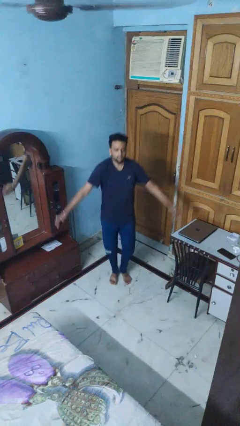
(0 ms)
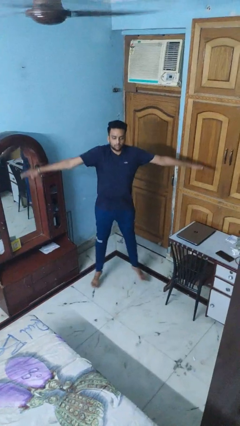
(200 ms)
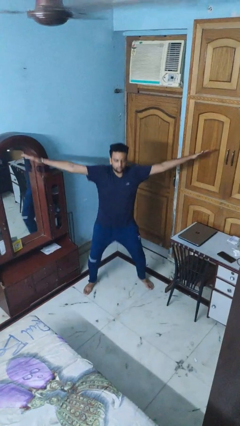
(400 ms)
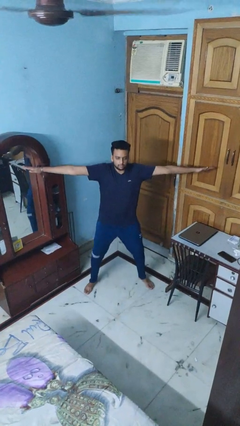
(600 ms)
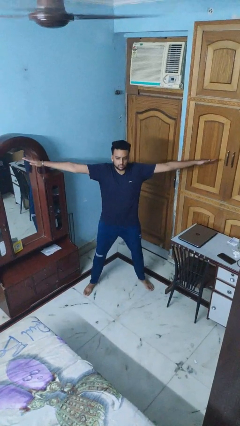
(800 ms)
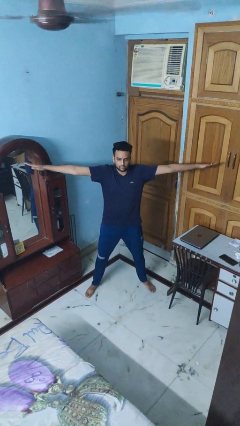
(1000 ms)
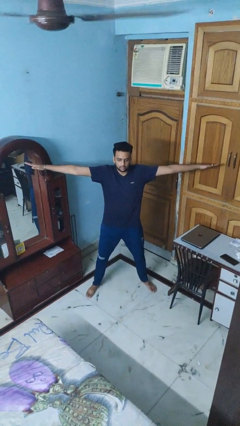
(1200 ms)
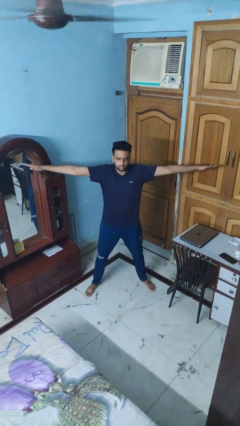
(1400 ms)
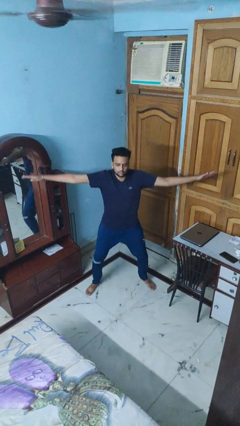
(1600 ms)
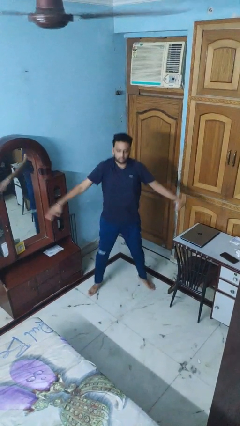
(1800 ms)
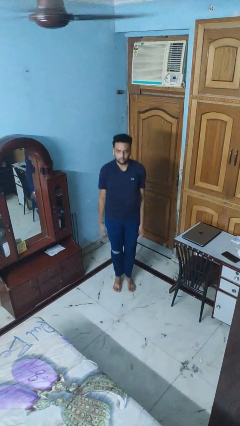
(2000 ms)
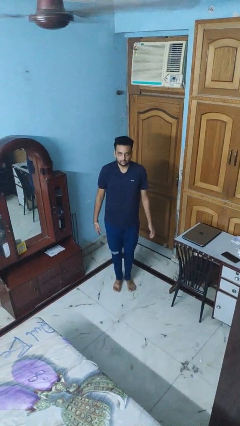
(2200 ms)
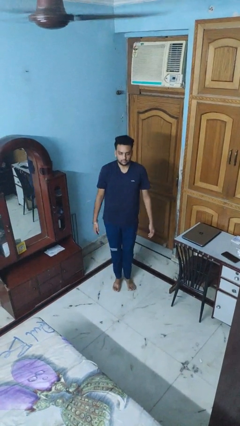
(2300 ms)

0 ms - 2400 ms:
person exercises with jumping jacks

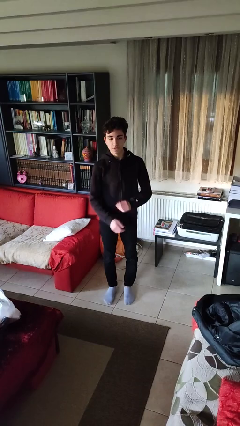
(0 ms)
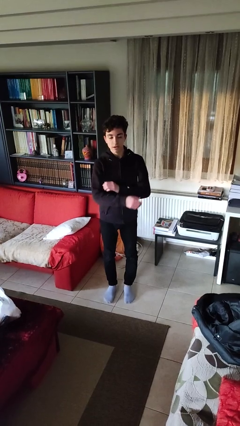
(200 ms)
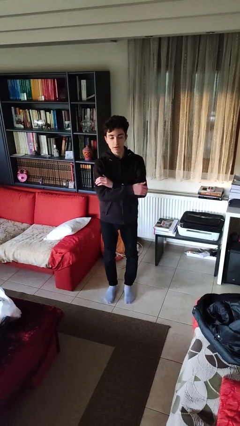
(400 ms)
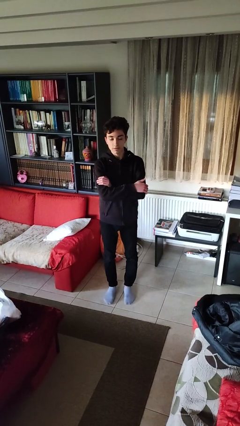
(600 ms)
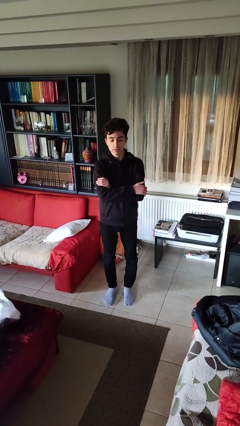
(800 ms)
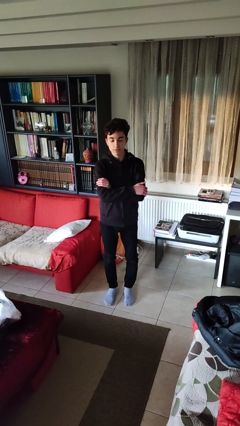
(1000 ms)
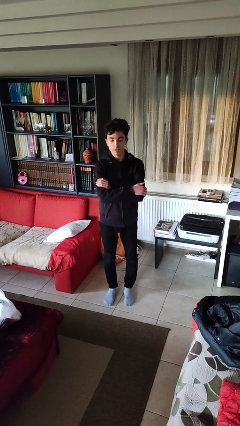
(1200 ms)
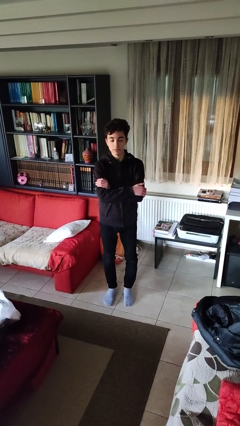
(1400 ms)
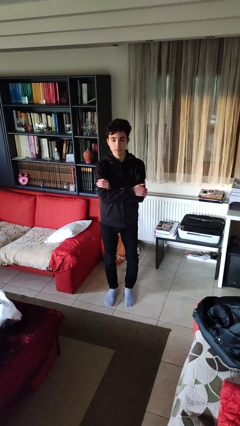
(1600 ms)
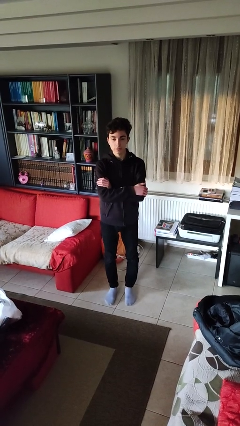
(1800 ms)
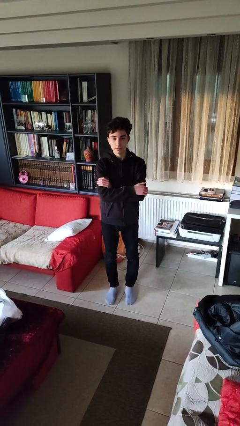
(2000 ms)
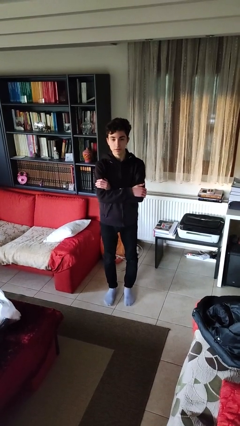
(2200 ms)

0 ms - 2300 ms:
person crosses arms

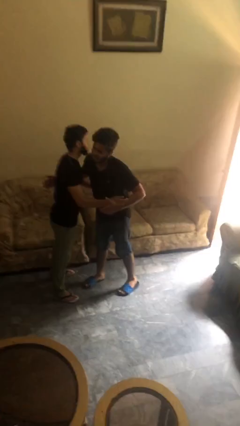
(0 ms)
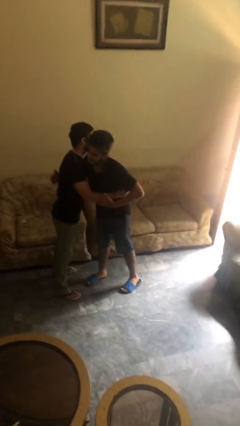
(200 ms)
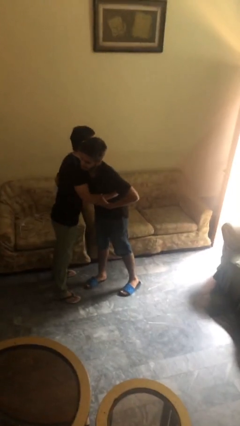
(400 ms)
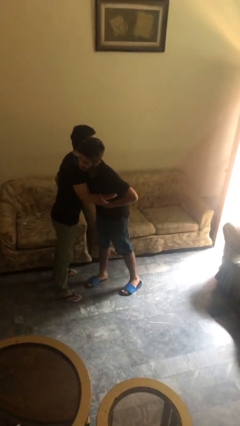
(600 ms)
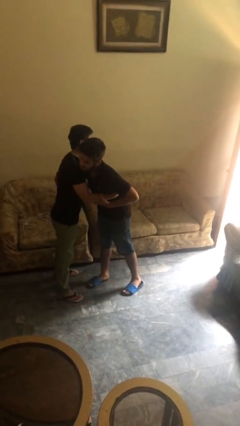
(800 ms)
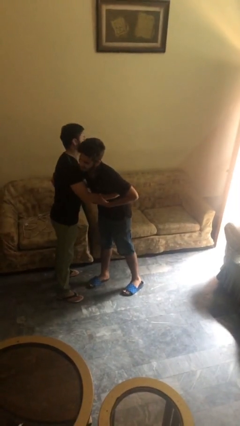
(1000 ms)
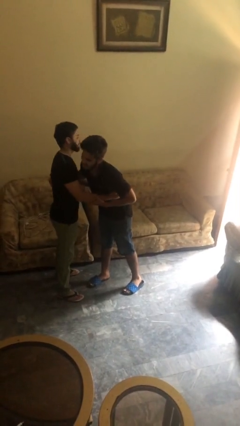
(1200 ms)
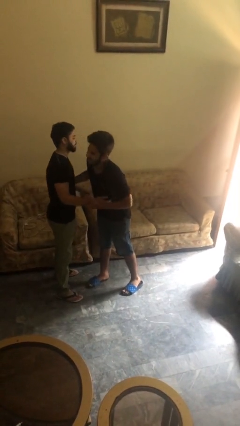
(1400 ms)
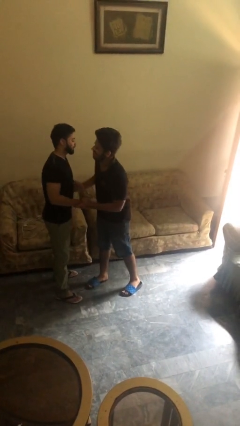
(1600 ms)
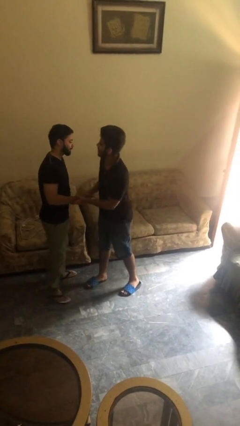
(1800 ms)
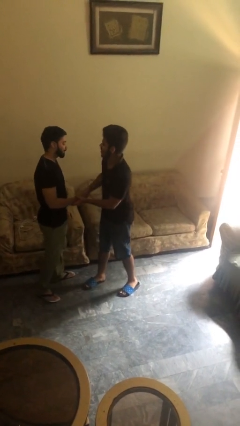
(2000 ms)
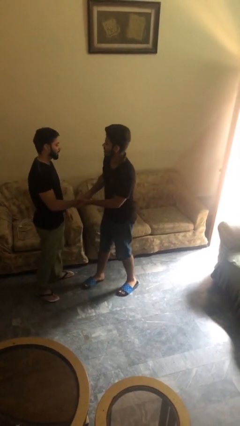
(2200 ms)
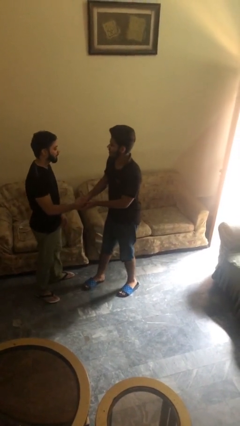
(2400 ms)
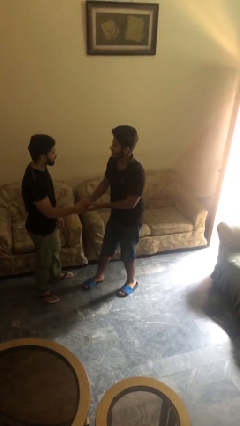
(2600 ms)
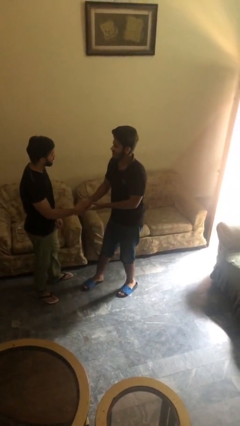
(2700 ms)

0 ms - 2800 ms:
person embraces person

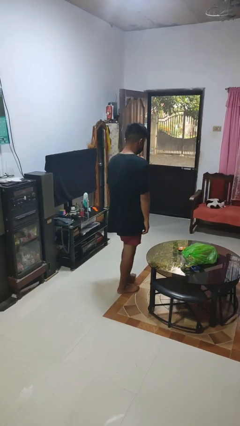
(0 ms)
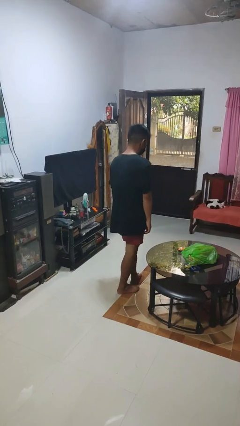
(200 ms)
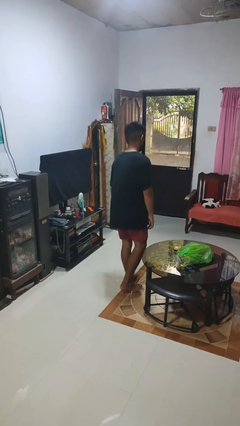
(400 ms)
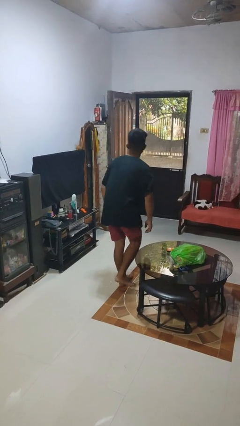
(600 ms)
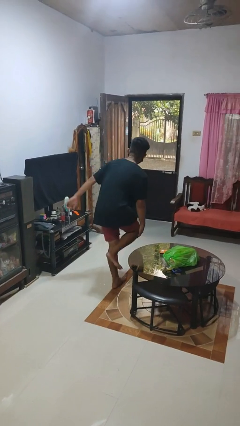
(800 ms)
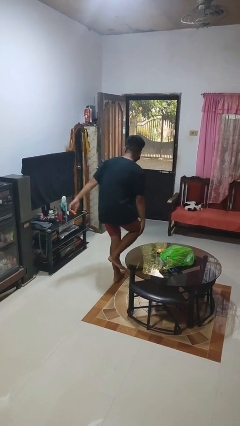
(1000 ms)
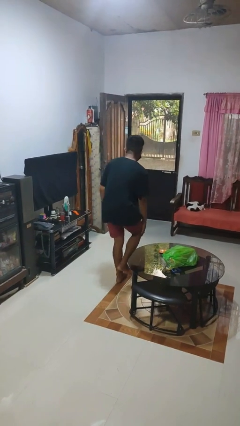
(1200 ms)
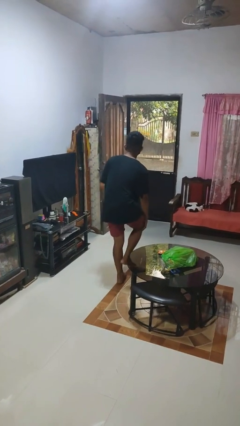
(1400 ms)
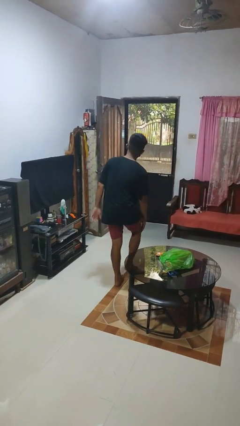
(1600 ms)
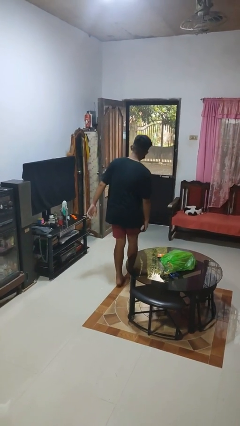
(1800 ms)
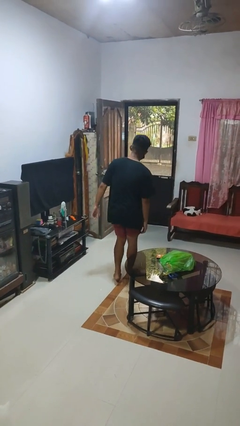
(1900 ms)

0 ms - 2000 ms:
person bumps into table

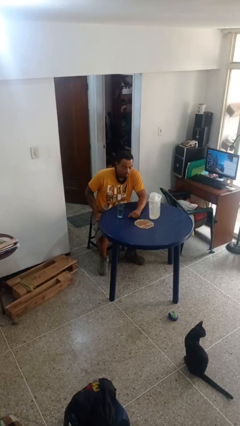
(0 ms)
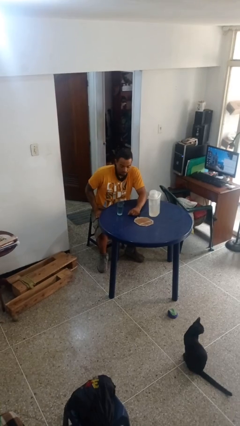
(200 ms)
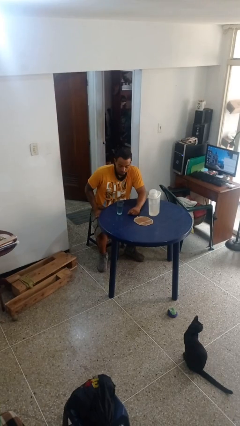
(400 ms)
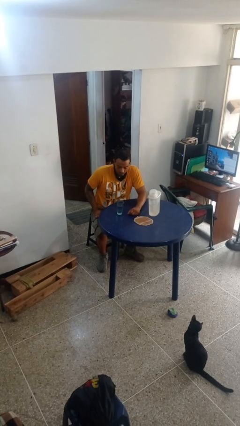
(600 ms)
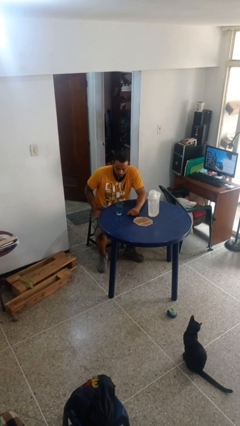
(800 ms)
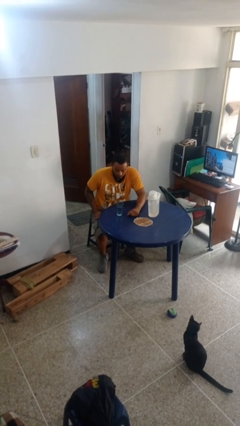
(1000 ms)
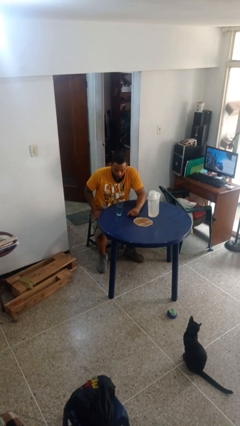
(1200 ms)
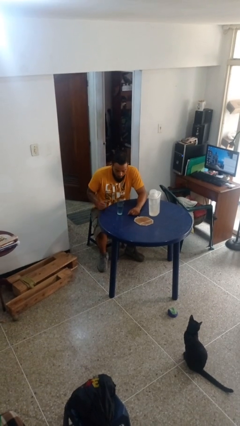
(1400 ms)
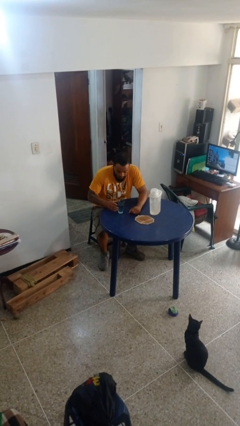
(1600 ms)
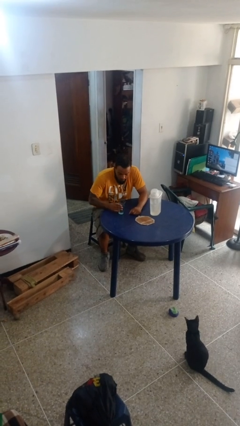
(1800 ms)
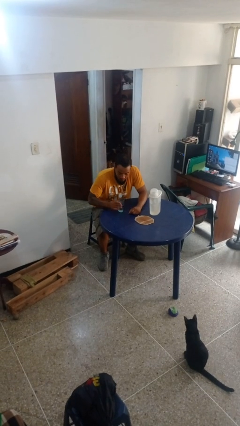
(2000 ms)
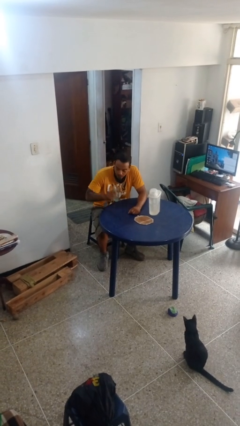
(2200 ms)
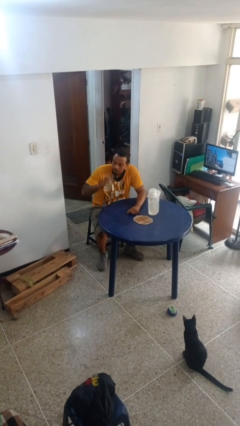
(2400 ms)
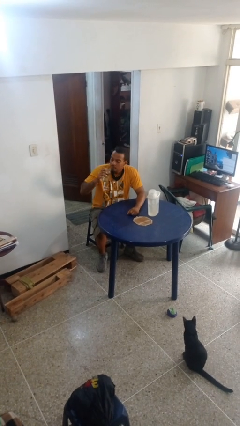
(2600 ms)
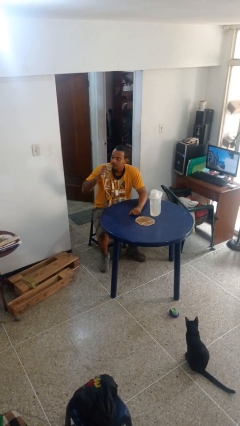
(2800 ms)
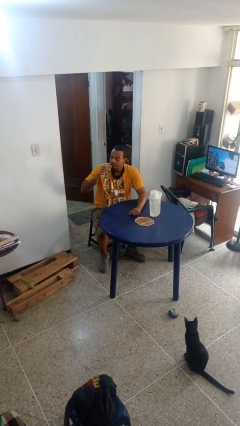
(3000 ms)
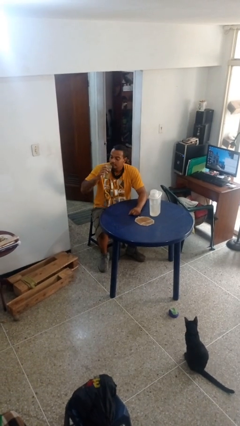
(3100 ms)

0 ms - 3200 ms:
person picks up object from table

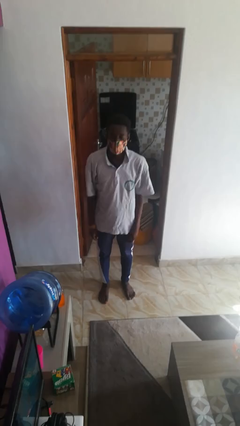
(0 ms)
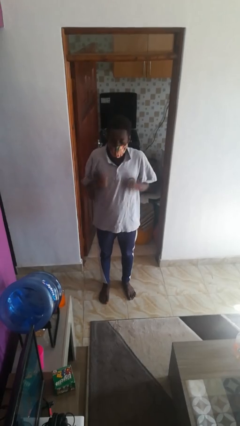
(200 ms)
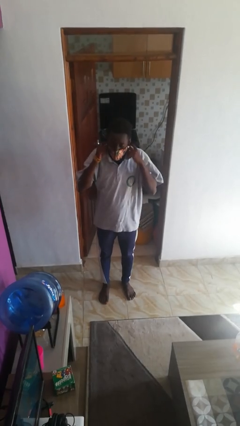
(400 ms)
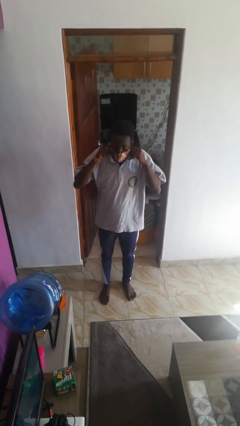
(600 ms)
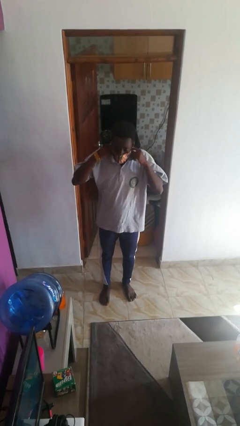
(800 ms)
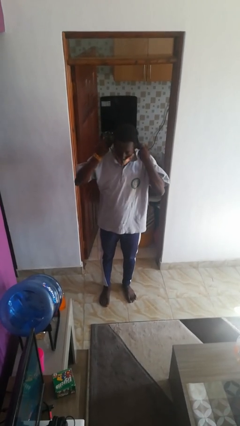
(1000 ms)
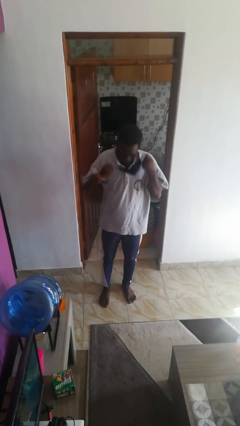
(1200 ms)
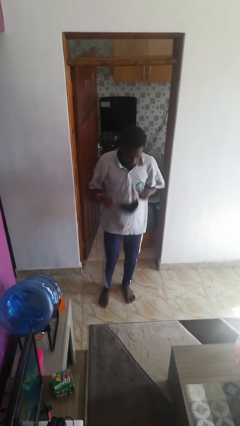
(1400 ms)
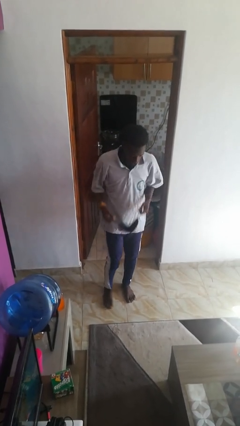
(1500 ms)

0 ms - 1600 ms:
person takes off facemask

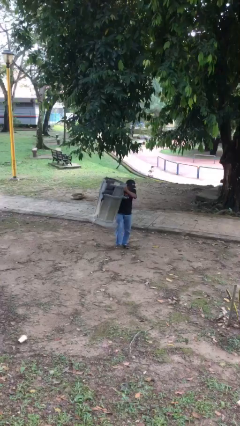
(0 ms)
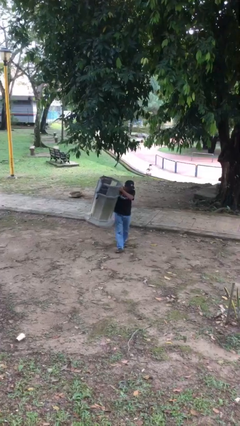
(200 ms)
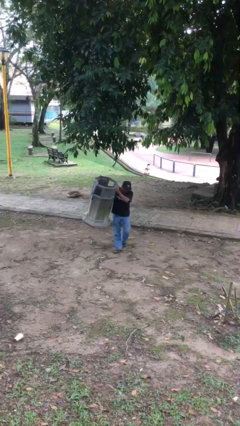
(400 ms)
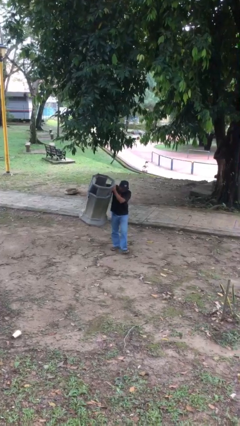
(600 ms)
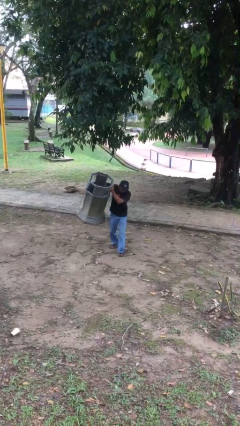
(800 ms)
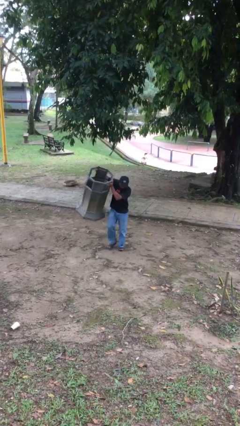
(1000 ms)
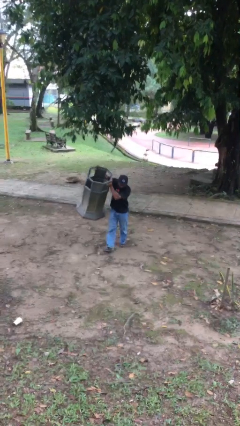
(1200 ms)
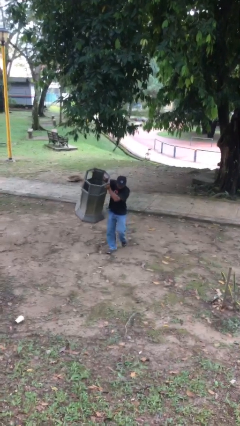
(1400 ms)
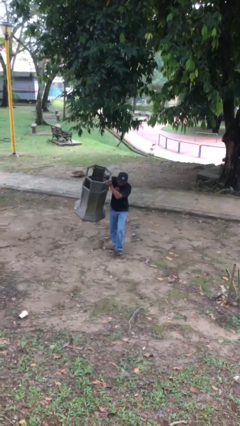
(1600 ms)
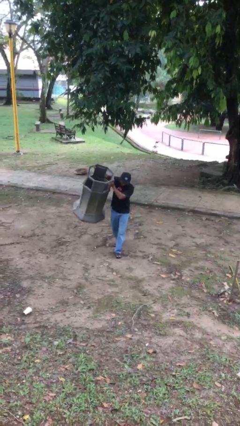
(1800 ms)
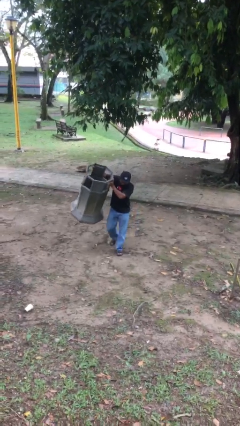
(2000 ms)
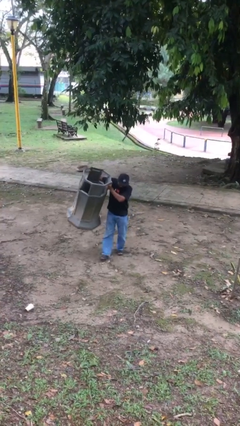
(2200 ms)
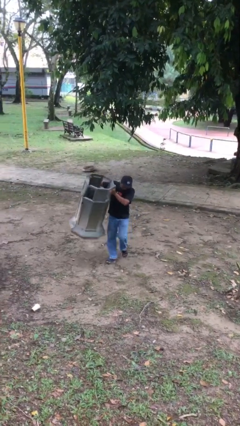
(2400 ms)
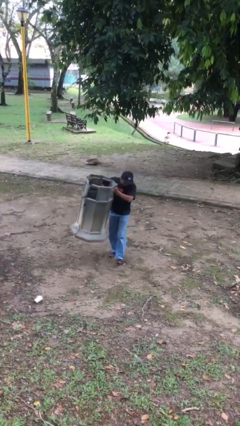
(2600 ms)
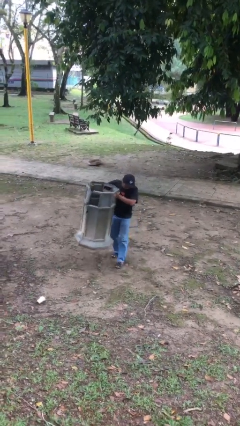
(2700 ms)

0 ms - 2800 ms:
person carries heavy object
